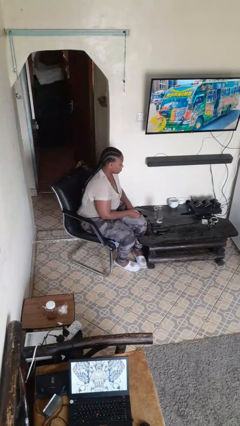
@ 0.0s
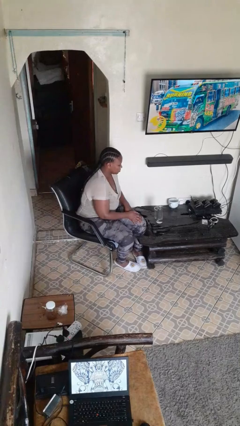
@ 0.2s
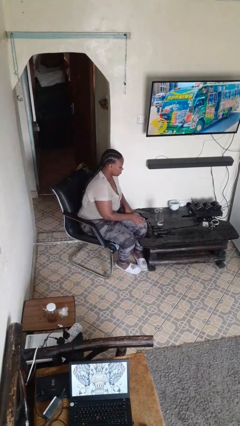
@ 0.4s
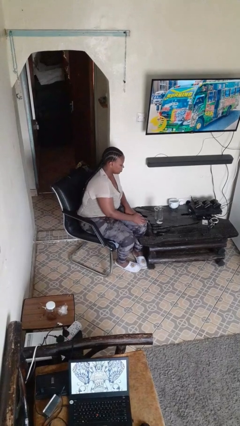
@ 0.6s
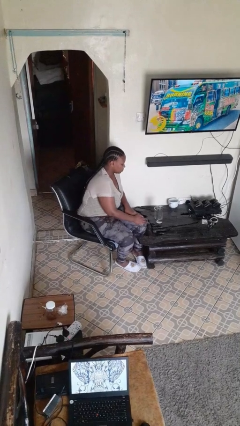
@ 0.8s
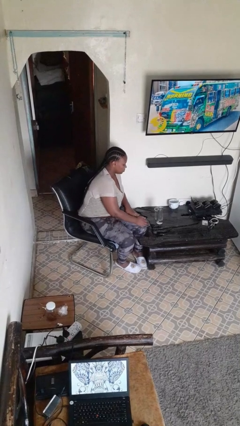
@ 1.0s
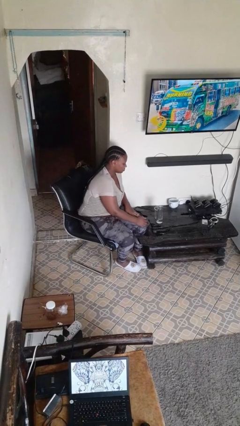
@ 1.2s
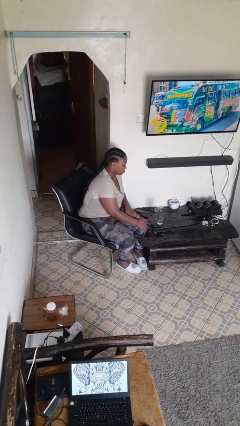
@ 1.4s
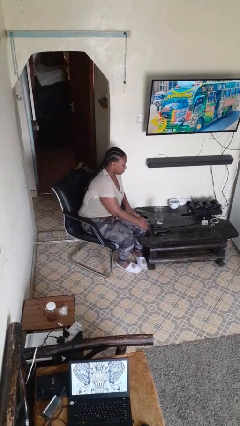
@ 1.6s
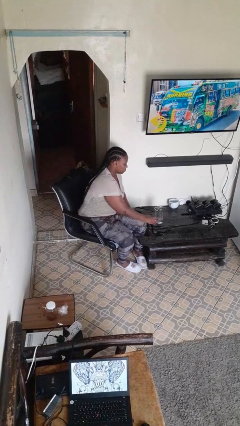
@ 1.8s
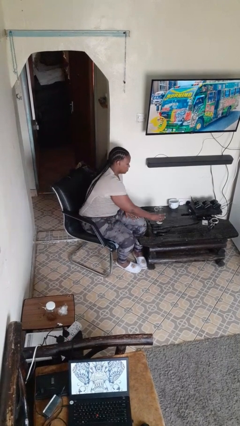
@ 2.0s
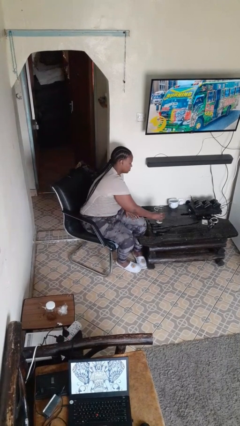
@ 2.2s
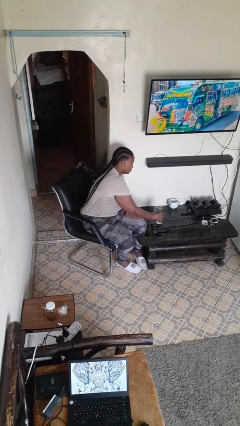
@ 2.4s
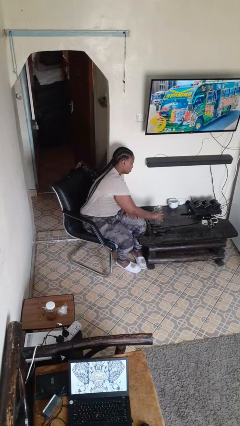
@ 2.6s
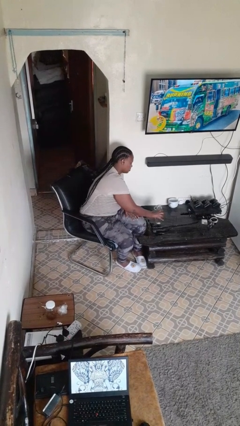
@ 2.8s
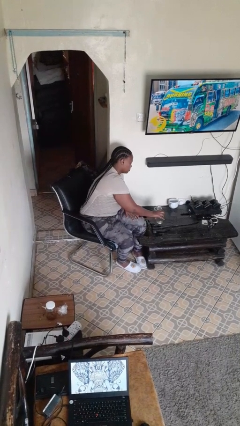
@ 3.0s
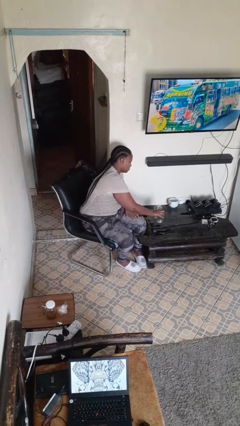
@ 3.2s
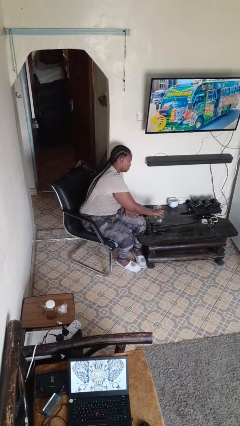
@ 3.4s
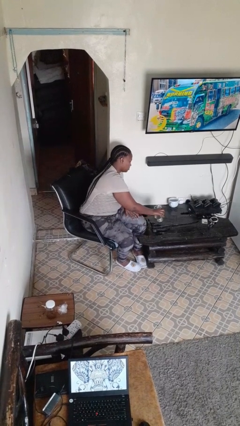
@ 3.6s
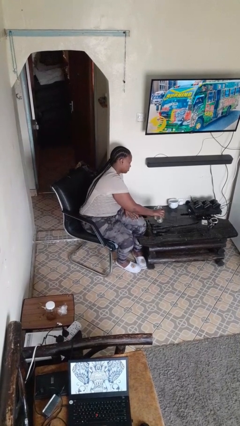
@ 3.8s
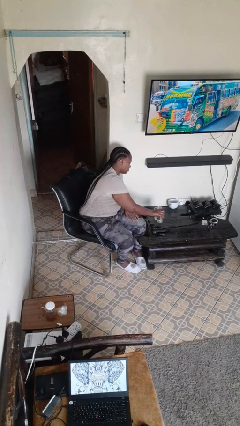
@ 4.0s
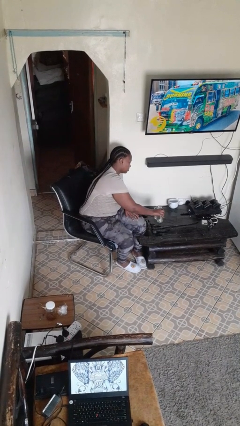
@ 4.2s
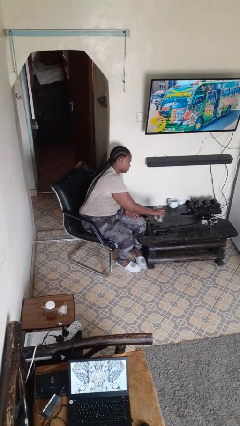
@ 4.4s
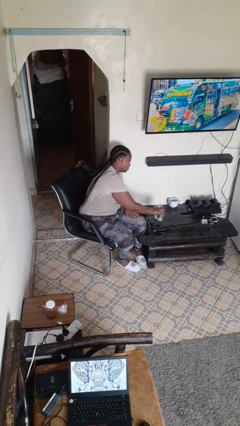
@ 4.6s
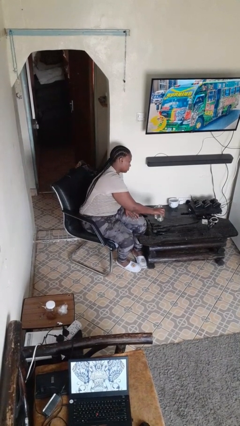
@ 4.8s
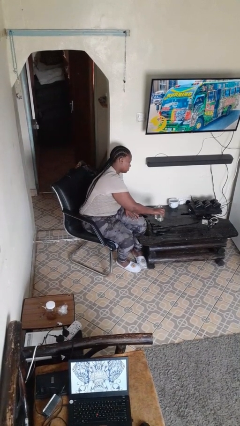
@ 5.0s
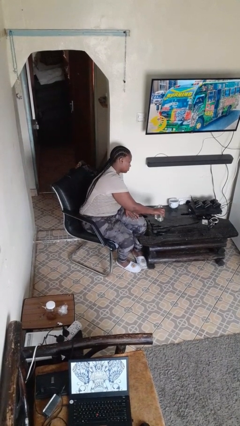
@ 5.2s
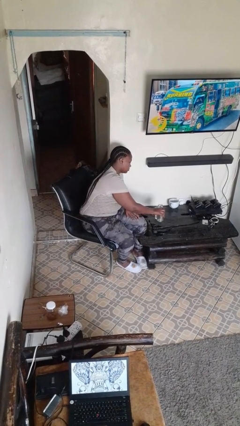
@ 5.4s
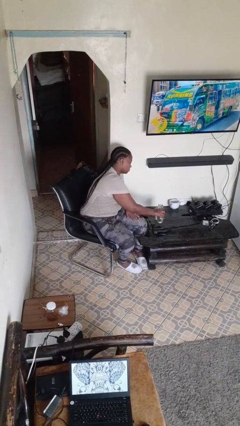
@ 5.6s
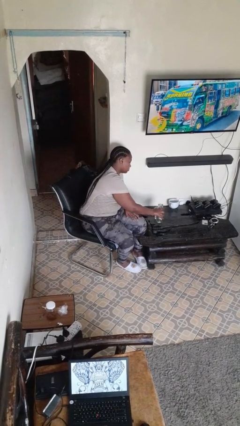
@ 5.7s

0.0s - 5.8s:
person pours liquid into cup

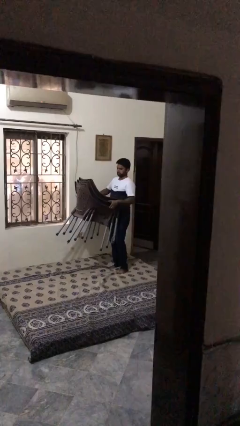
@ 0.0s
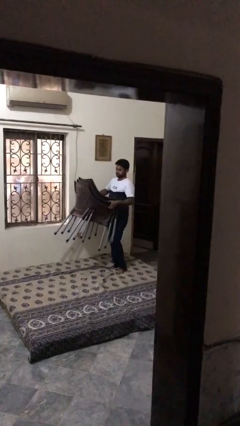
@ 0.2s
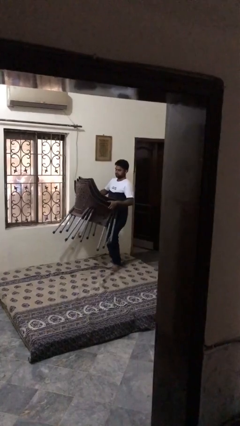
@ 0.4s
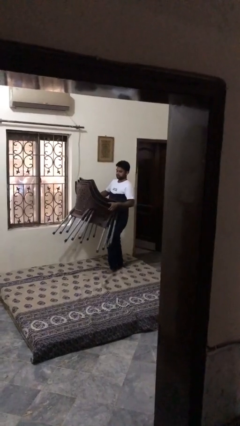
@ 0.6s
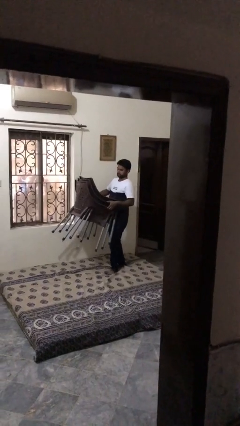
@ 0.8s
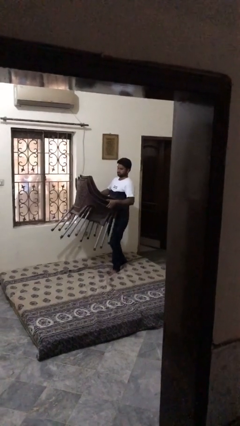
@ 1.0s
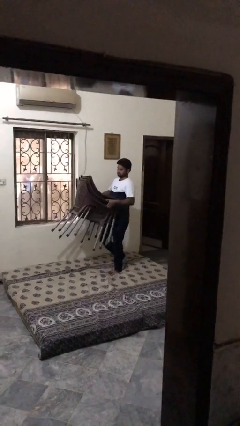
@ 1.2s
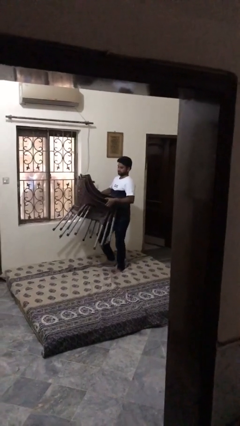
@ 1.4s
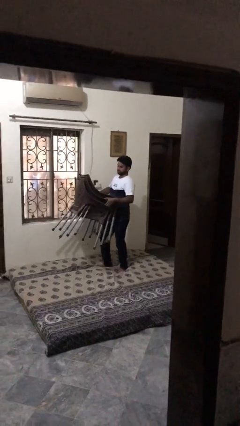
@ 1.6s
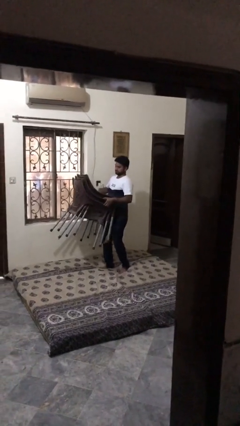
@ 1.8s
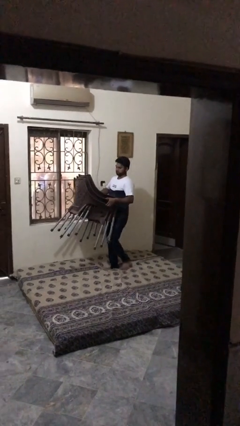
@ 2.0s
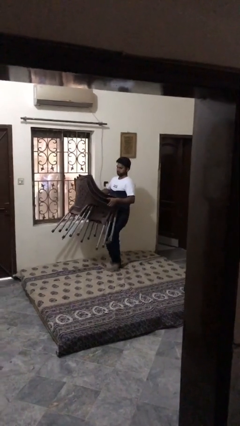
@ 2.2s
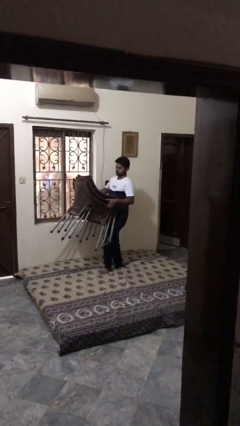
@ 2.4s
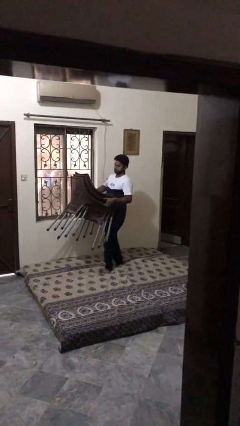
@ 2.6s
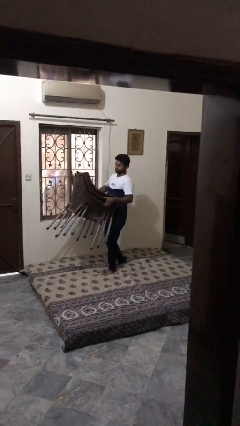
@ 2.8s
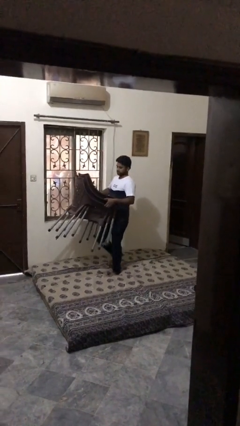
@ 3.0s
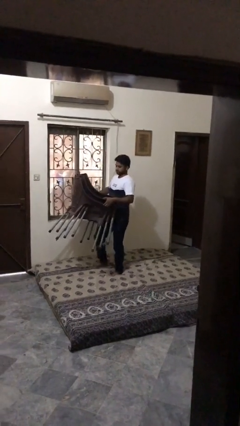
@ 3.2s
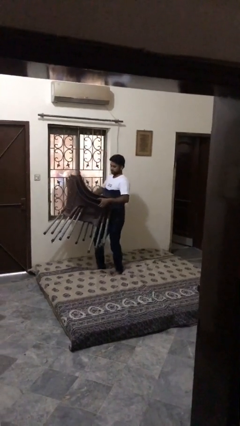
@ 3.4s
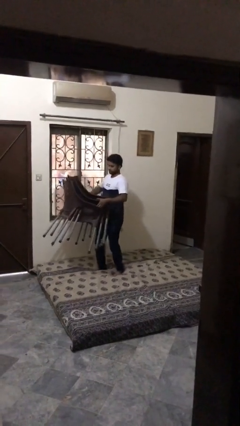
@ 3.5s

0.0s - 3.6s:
person carries heavy object

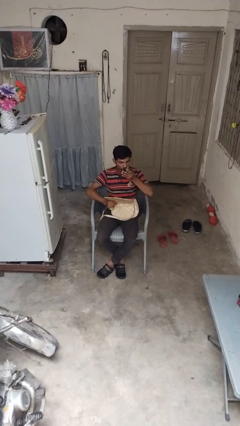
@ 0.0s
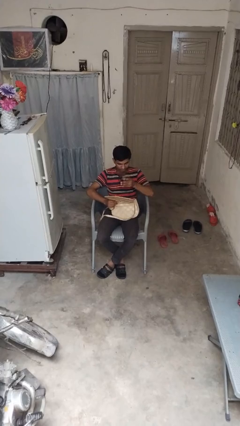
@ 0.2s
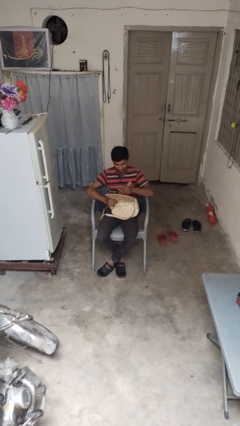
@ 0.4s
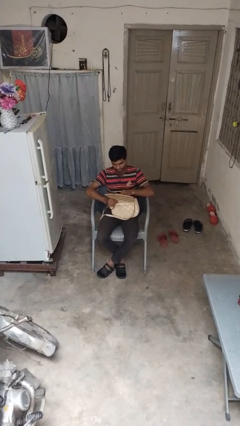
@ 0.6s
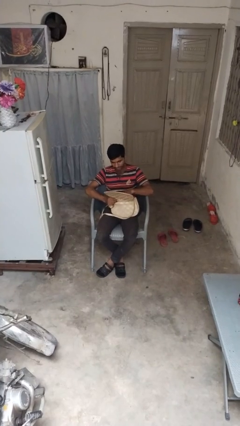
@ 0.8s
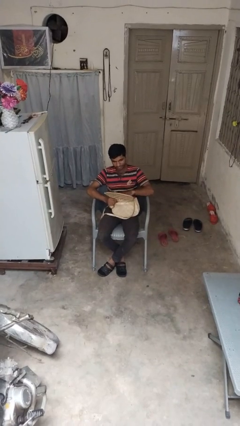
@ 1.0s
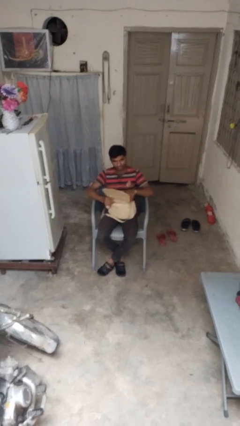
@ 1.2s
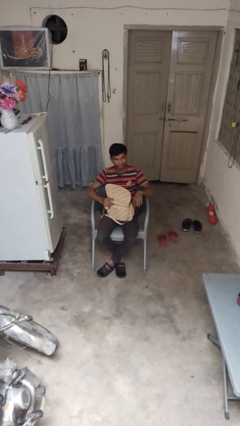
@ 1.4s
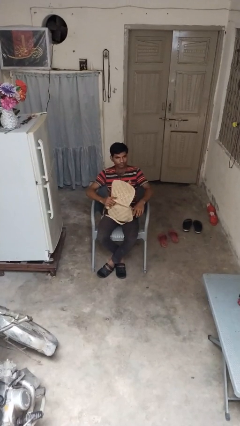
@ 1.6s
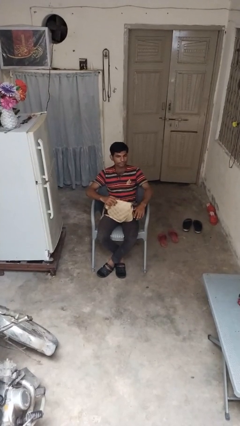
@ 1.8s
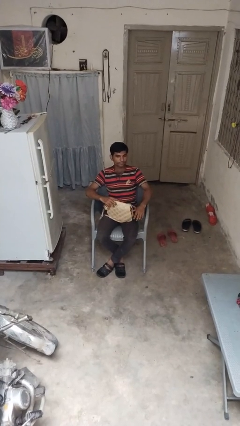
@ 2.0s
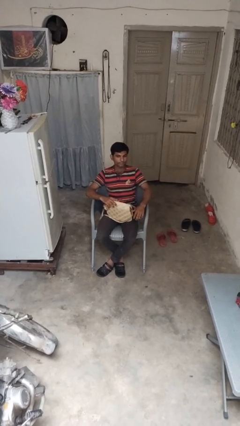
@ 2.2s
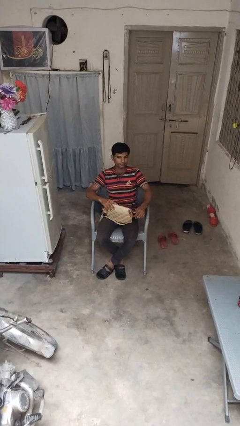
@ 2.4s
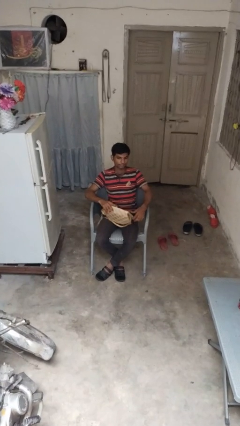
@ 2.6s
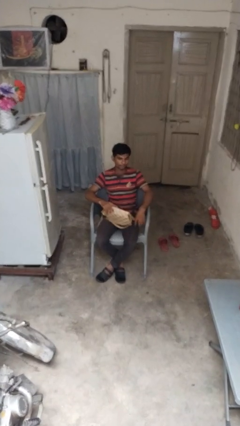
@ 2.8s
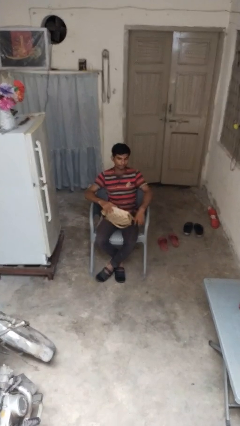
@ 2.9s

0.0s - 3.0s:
person puts object into purse

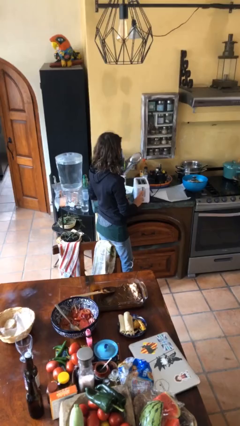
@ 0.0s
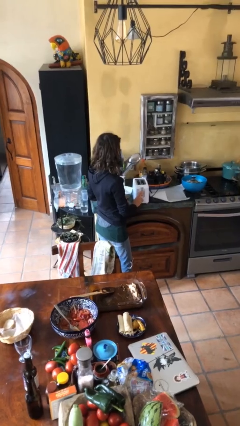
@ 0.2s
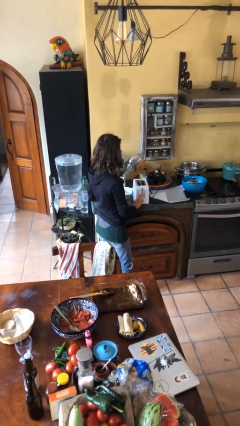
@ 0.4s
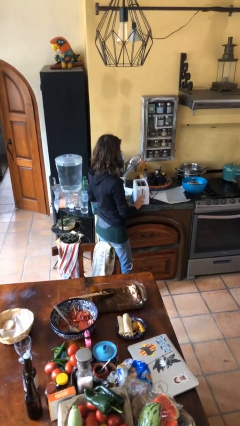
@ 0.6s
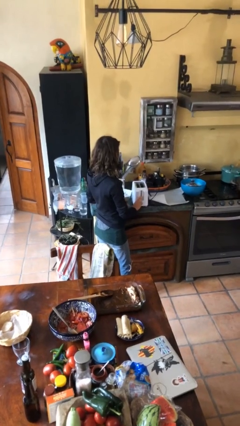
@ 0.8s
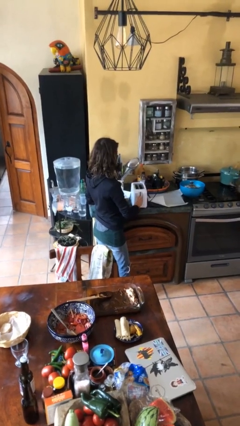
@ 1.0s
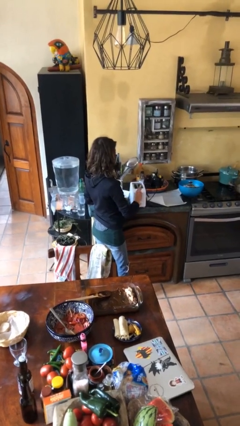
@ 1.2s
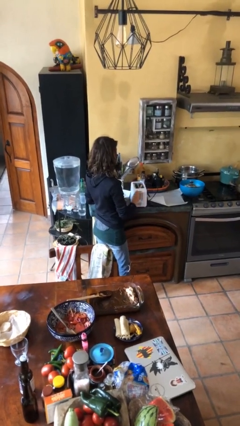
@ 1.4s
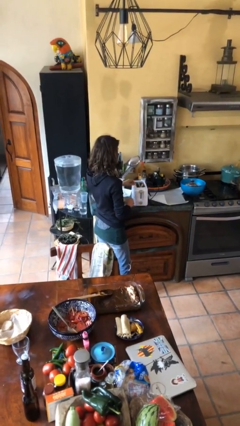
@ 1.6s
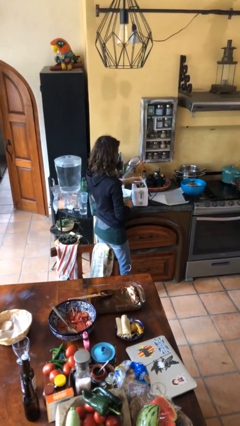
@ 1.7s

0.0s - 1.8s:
person takes object from toaster

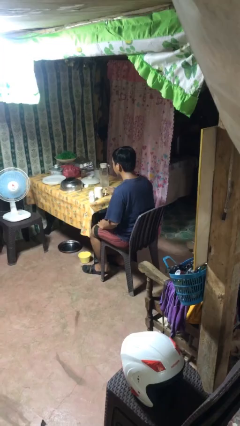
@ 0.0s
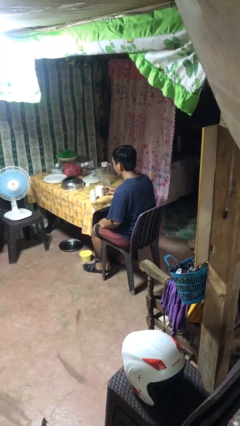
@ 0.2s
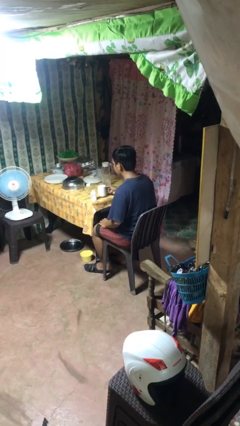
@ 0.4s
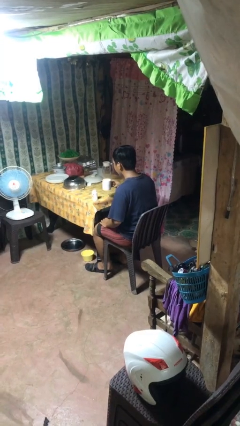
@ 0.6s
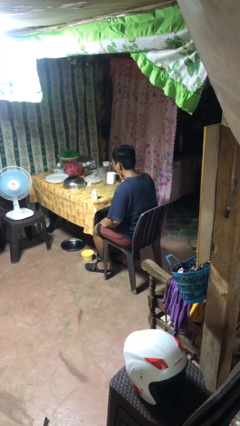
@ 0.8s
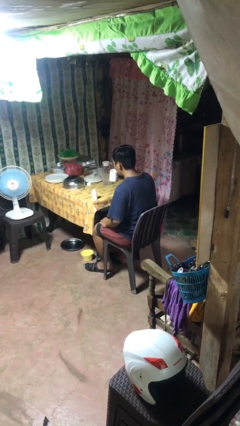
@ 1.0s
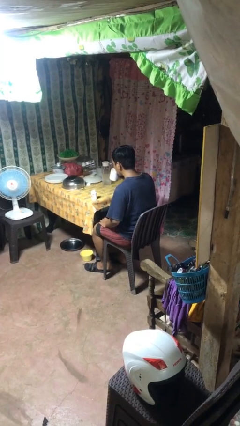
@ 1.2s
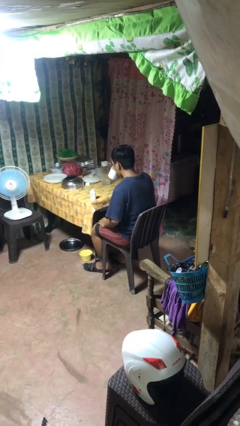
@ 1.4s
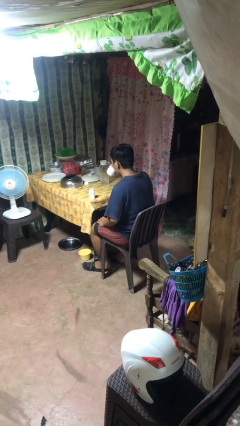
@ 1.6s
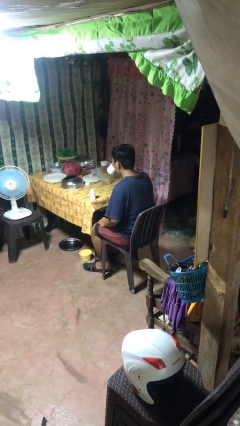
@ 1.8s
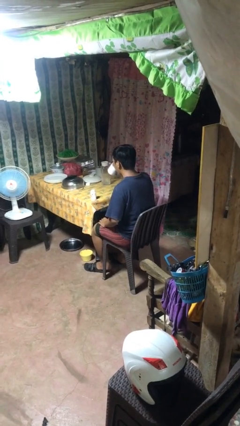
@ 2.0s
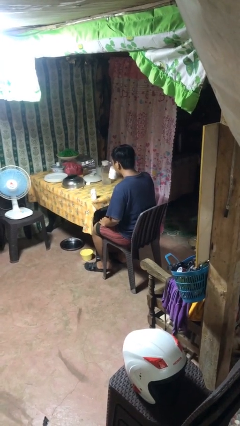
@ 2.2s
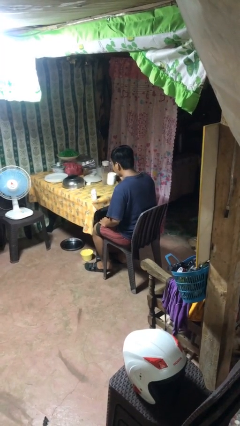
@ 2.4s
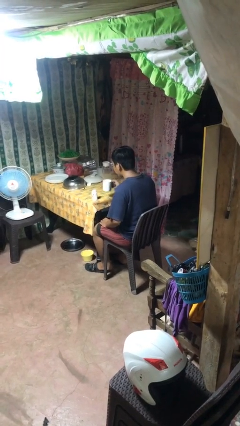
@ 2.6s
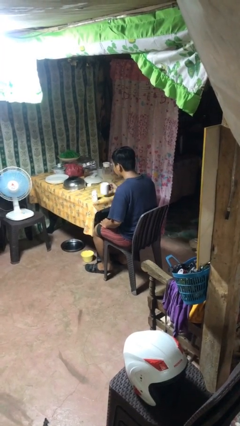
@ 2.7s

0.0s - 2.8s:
person drinks from cup

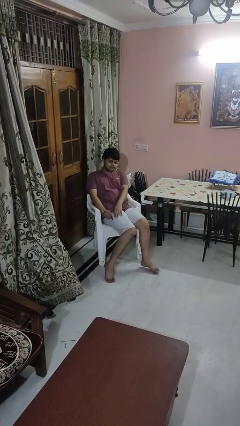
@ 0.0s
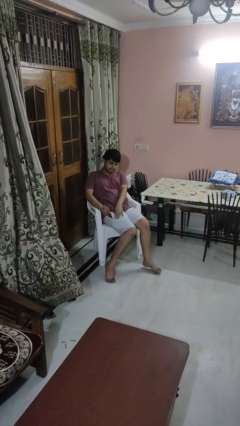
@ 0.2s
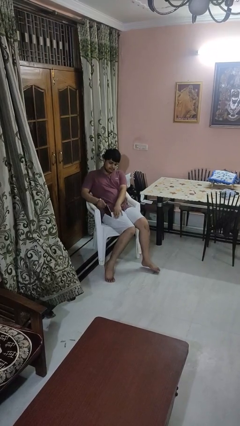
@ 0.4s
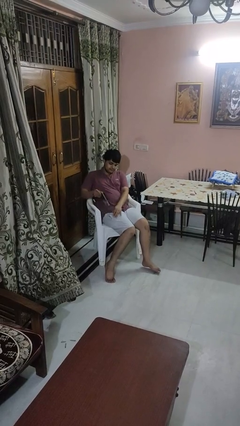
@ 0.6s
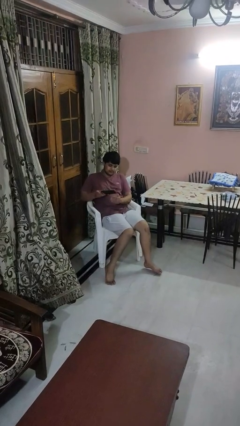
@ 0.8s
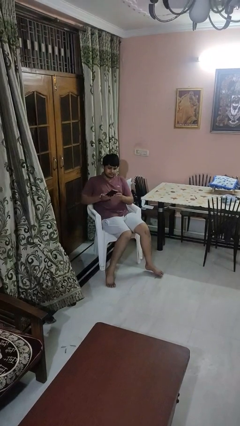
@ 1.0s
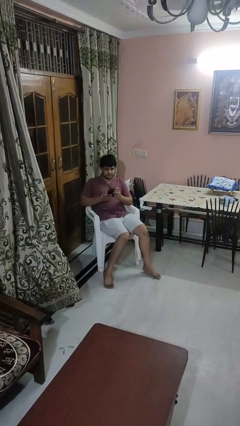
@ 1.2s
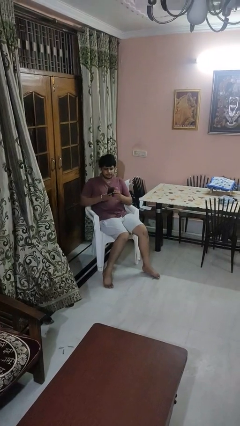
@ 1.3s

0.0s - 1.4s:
person takes phone from pocket
